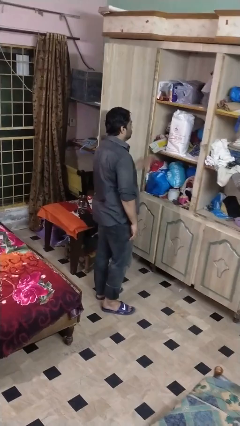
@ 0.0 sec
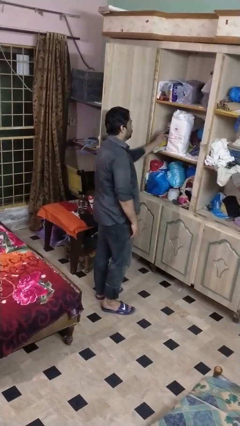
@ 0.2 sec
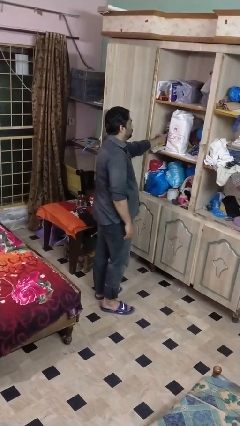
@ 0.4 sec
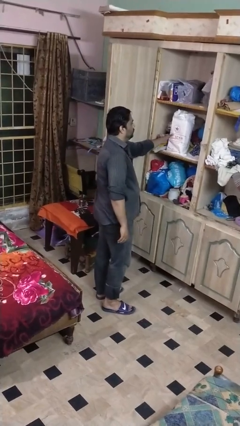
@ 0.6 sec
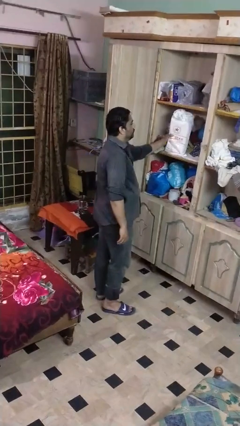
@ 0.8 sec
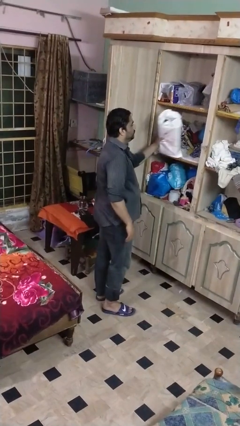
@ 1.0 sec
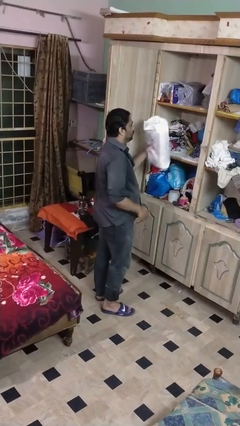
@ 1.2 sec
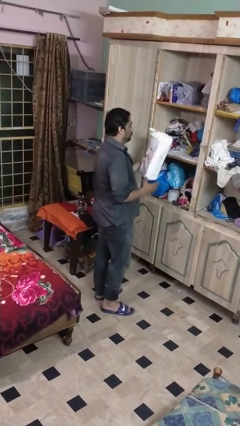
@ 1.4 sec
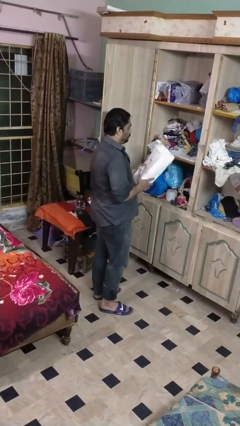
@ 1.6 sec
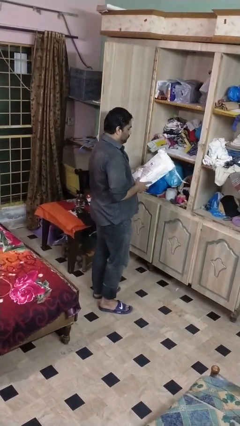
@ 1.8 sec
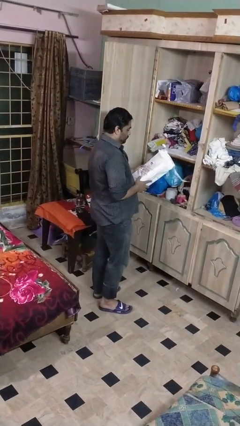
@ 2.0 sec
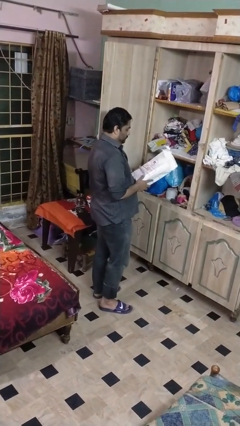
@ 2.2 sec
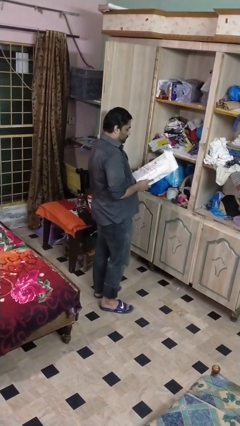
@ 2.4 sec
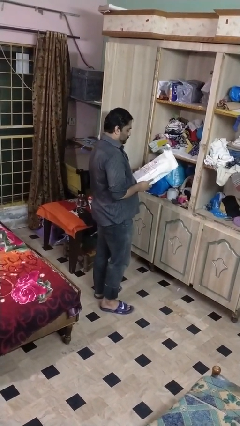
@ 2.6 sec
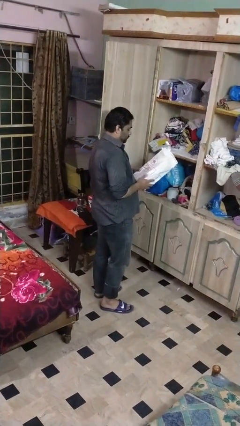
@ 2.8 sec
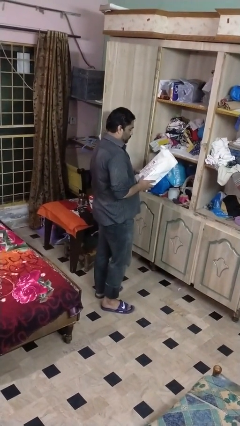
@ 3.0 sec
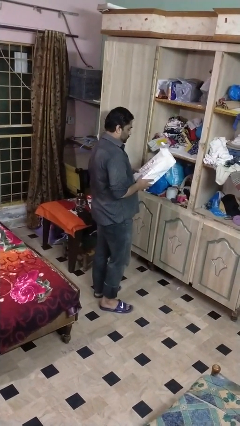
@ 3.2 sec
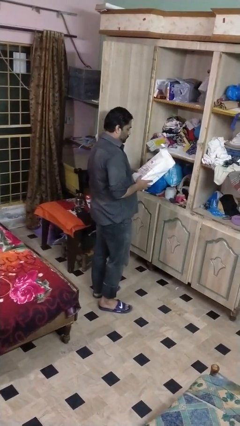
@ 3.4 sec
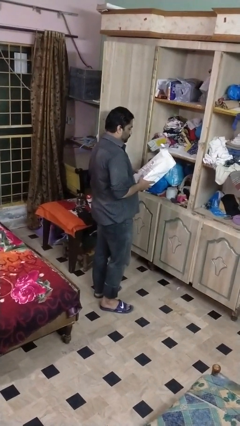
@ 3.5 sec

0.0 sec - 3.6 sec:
person picks up object from cabinet

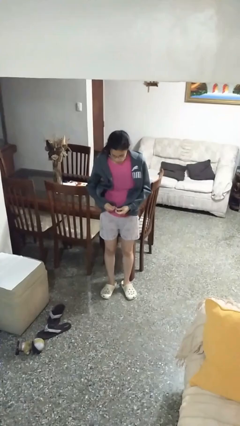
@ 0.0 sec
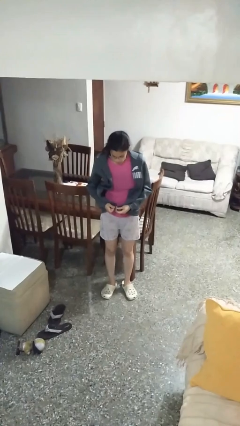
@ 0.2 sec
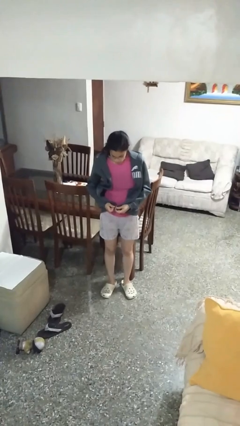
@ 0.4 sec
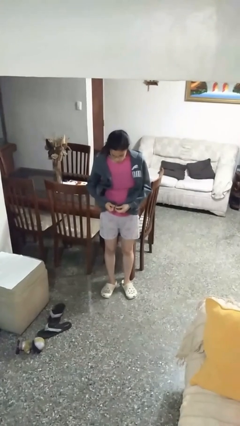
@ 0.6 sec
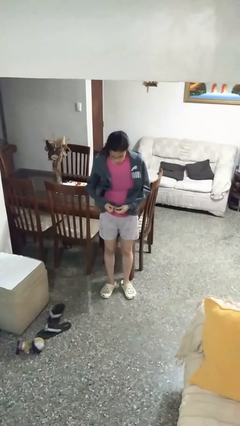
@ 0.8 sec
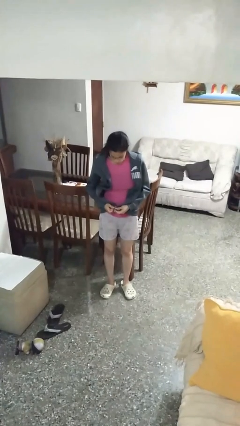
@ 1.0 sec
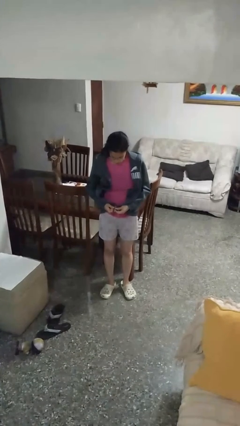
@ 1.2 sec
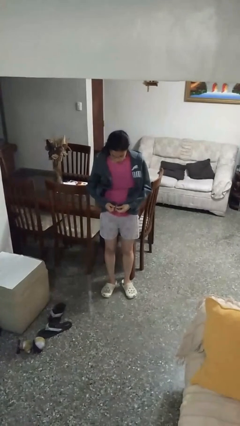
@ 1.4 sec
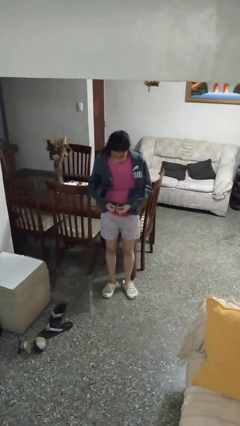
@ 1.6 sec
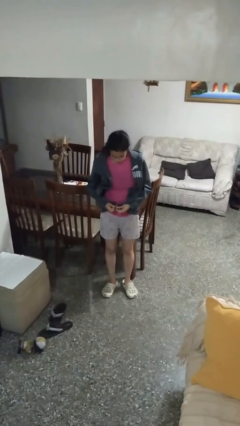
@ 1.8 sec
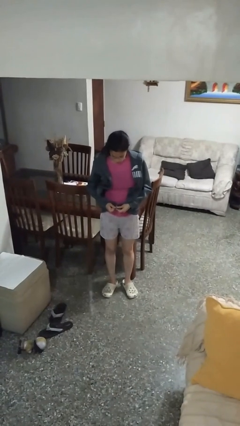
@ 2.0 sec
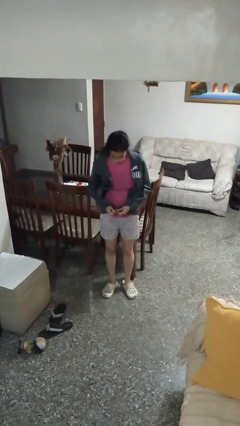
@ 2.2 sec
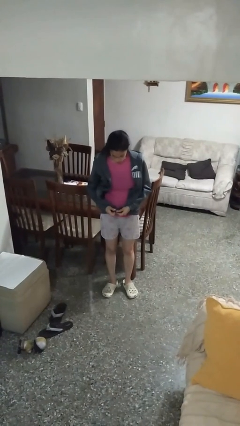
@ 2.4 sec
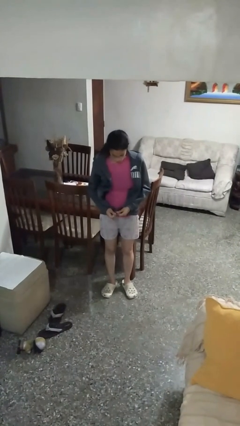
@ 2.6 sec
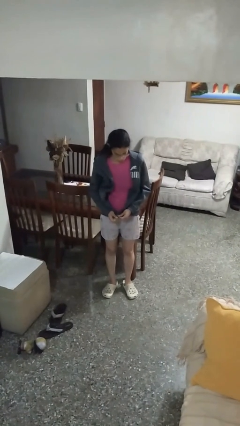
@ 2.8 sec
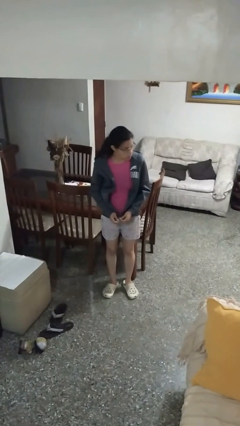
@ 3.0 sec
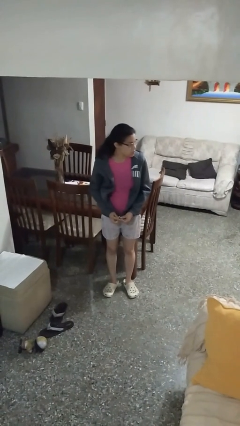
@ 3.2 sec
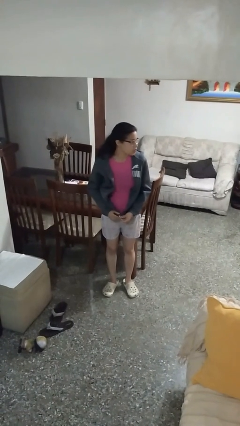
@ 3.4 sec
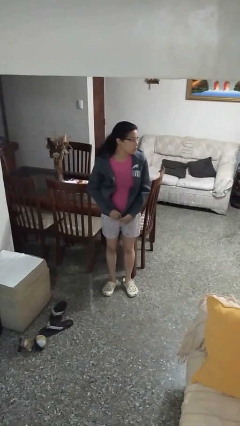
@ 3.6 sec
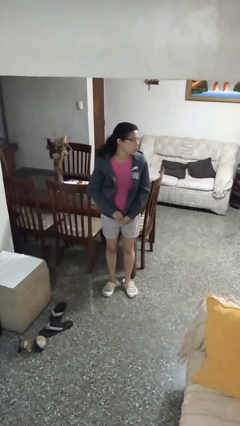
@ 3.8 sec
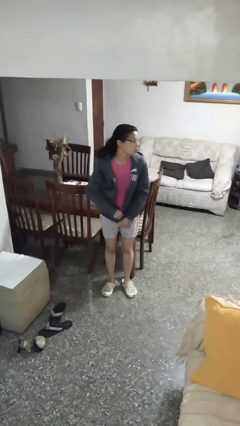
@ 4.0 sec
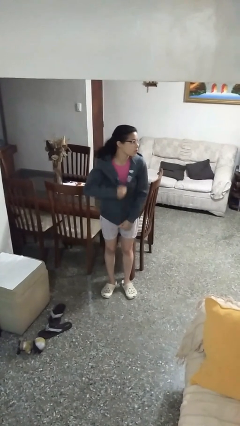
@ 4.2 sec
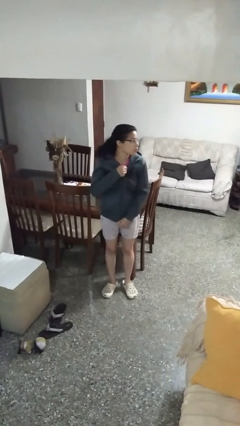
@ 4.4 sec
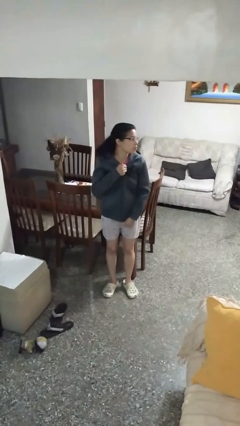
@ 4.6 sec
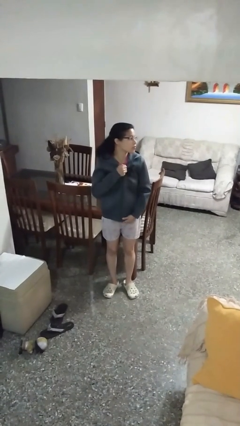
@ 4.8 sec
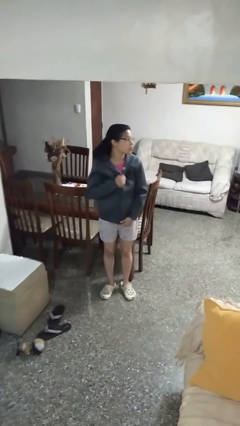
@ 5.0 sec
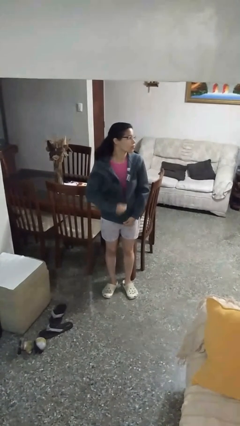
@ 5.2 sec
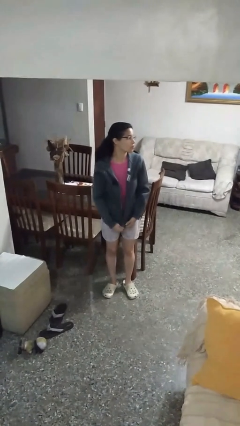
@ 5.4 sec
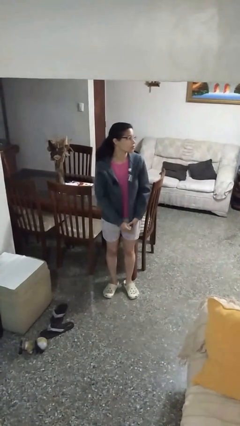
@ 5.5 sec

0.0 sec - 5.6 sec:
person zips up jacket

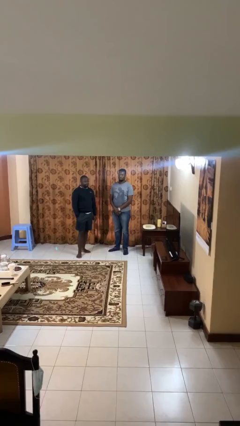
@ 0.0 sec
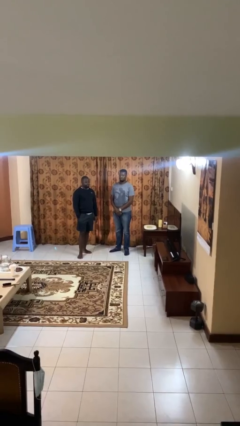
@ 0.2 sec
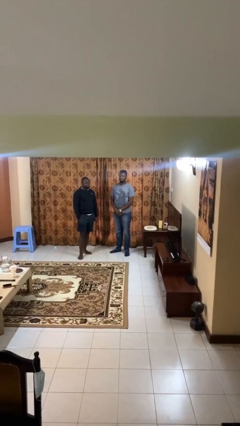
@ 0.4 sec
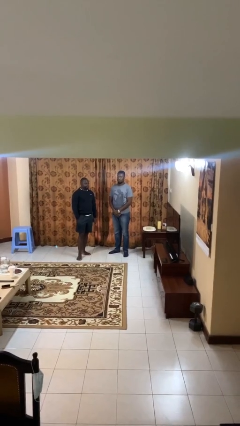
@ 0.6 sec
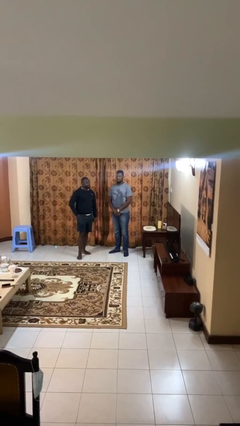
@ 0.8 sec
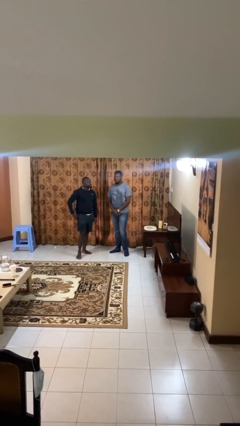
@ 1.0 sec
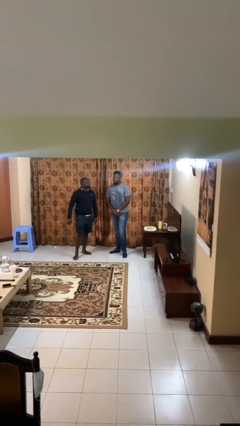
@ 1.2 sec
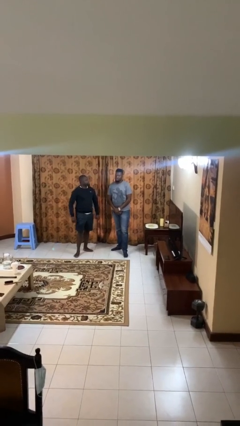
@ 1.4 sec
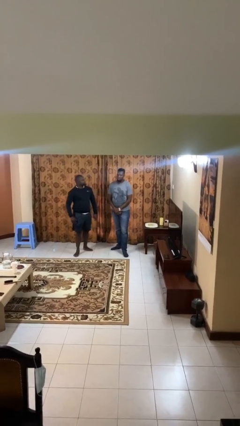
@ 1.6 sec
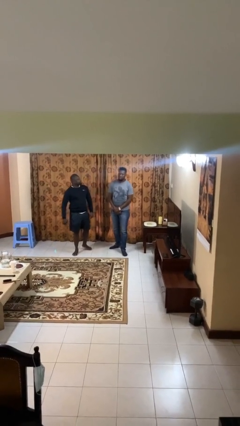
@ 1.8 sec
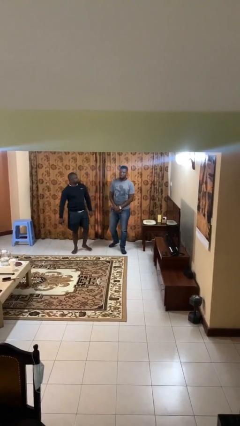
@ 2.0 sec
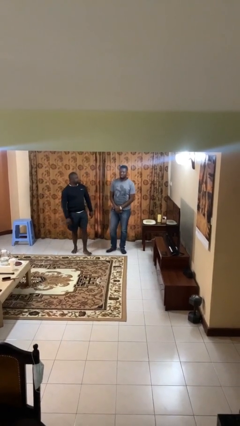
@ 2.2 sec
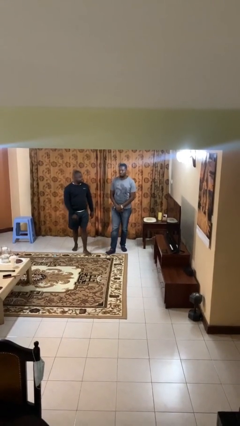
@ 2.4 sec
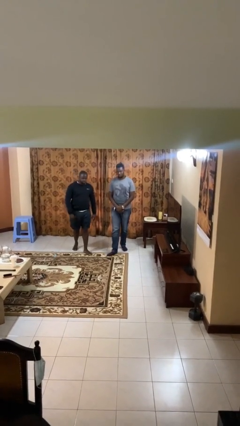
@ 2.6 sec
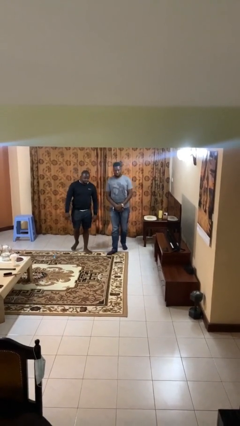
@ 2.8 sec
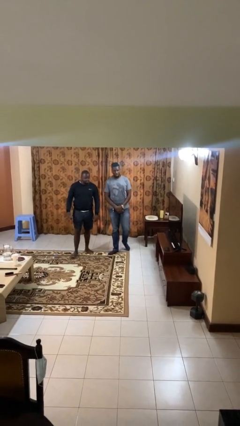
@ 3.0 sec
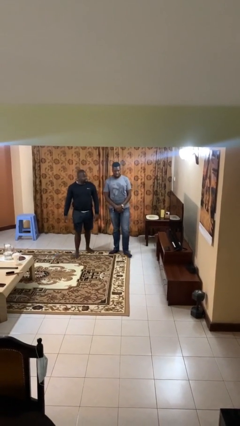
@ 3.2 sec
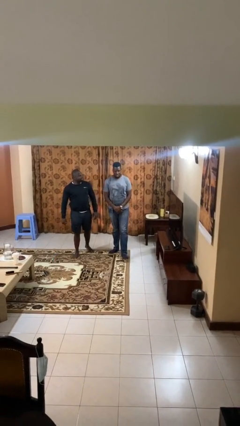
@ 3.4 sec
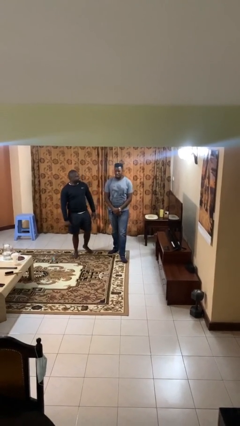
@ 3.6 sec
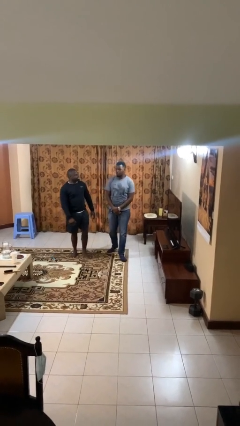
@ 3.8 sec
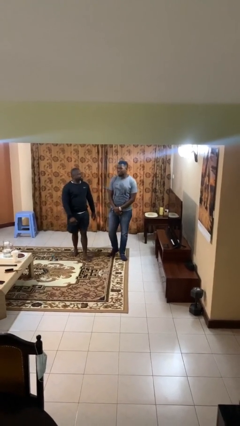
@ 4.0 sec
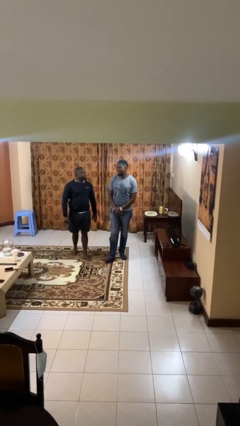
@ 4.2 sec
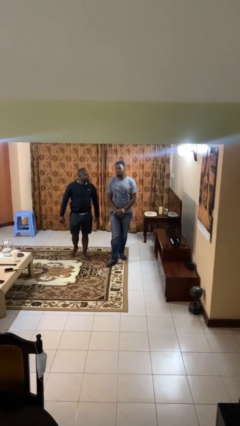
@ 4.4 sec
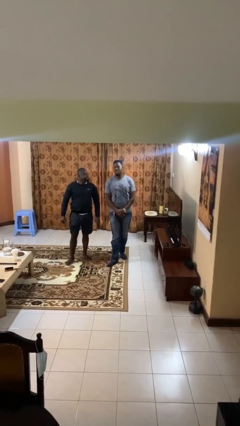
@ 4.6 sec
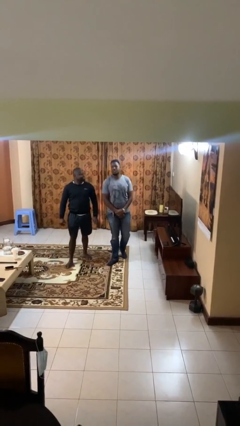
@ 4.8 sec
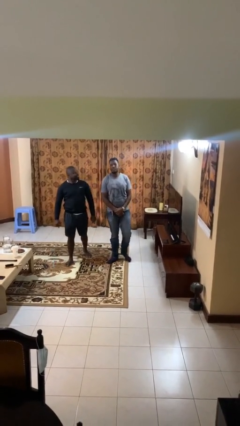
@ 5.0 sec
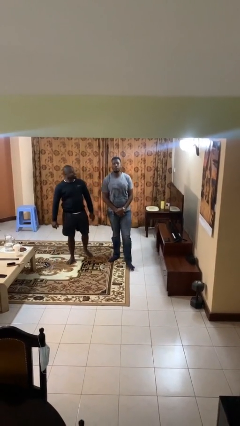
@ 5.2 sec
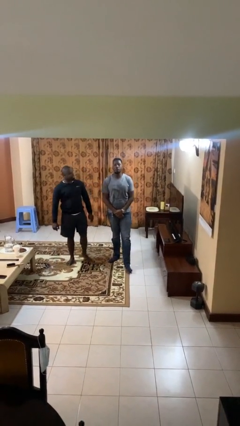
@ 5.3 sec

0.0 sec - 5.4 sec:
person talks to person

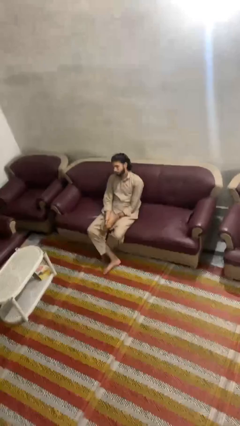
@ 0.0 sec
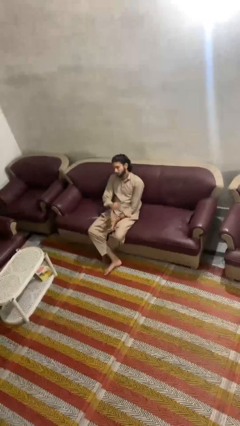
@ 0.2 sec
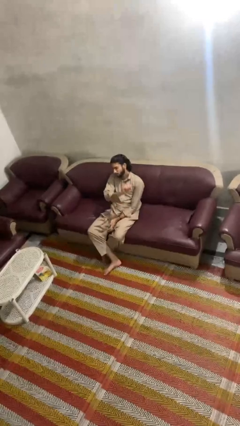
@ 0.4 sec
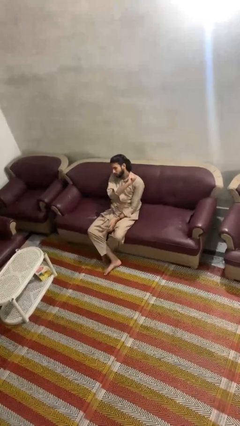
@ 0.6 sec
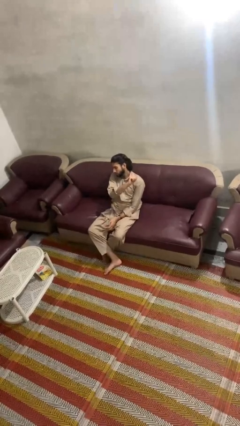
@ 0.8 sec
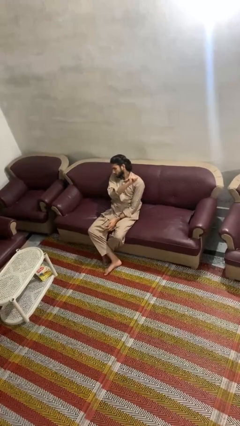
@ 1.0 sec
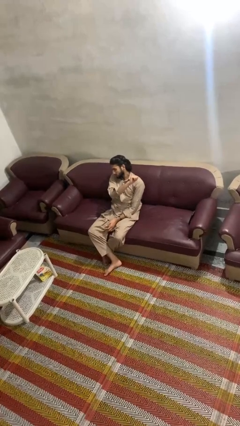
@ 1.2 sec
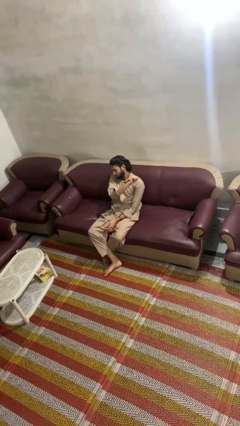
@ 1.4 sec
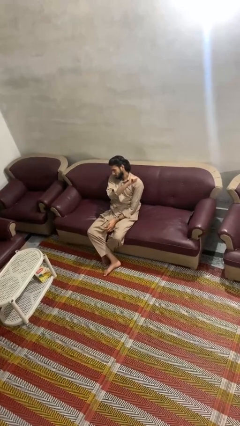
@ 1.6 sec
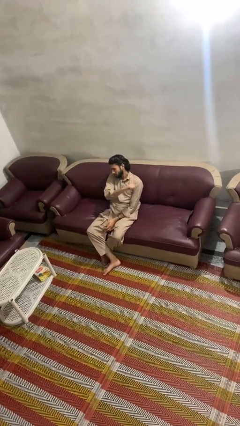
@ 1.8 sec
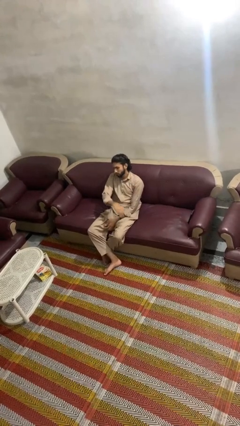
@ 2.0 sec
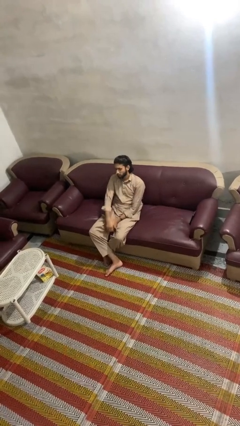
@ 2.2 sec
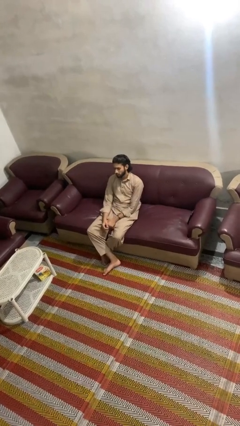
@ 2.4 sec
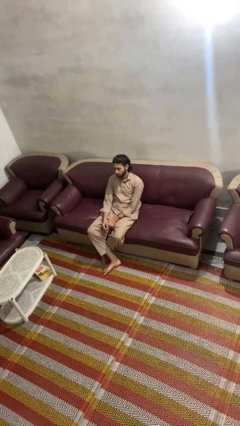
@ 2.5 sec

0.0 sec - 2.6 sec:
person gestures behind me

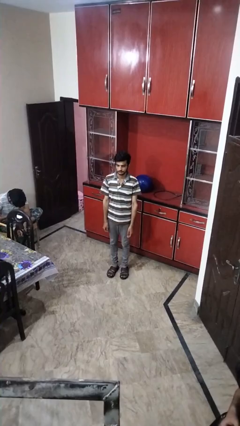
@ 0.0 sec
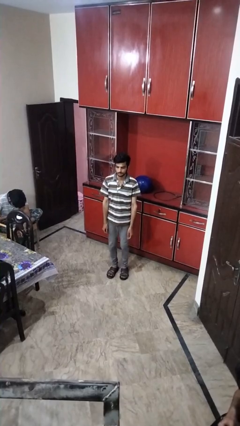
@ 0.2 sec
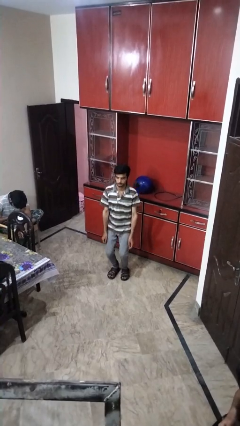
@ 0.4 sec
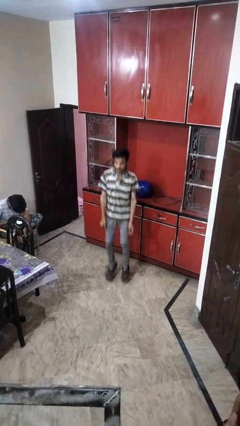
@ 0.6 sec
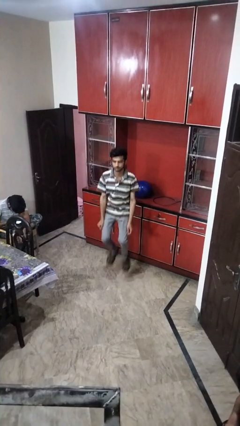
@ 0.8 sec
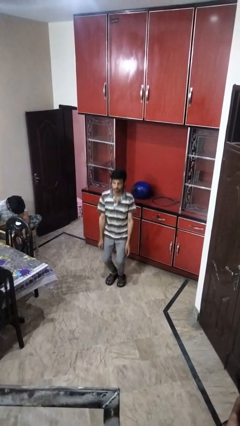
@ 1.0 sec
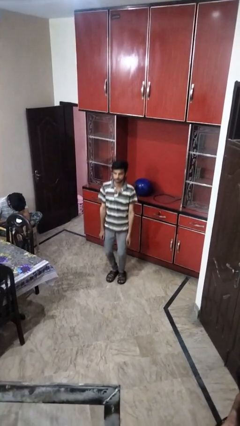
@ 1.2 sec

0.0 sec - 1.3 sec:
person jumps
